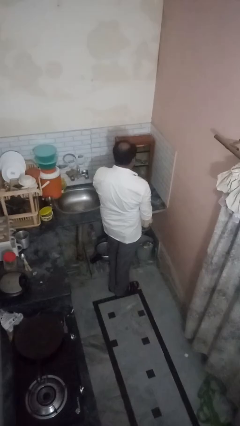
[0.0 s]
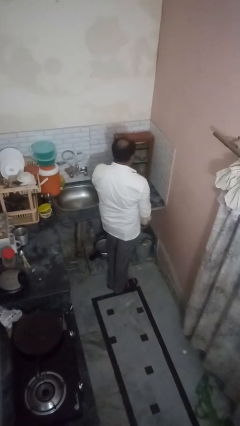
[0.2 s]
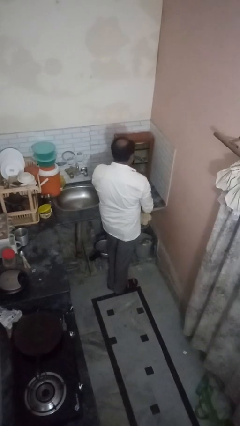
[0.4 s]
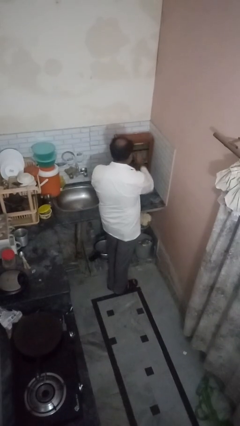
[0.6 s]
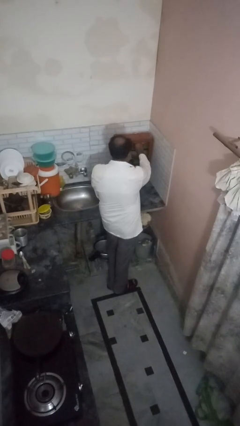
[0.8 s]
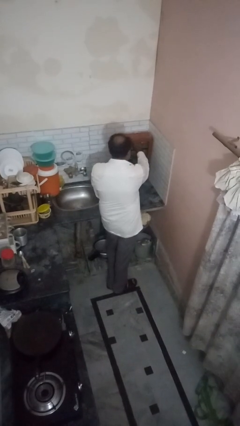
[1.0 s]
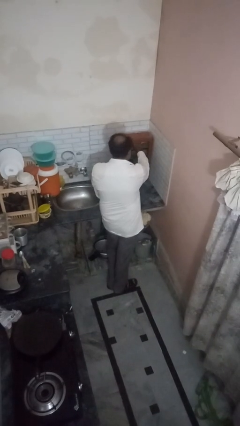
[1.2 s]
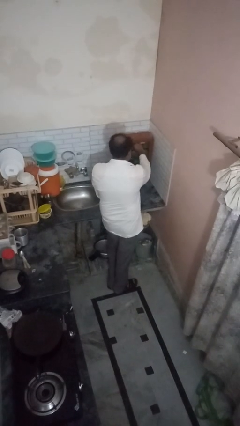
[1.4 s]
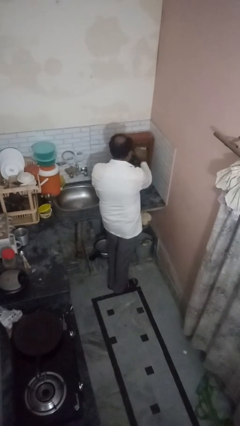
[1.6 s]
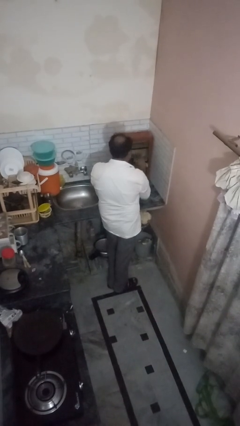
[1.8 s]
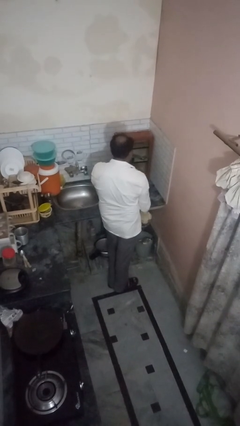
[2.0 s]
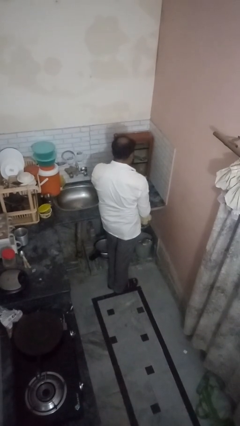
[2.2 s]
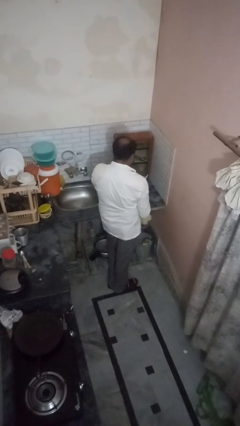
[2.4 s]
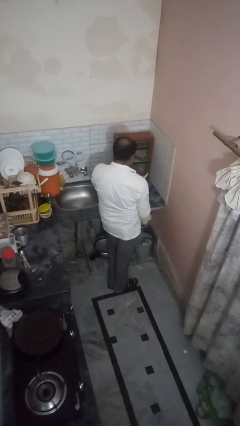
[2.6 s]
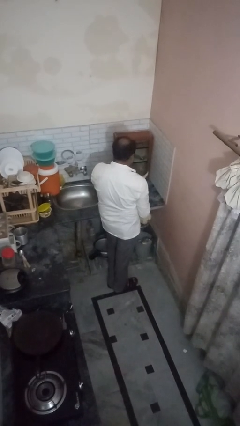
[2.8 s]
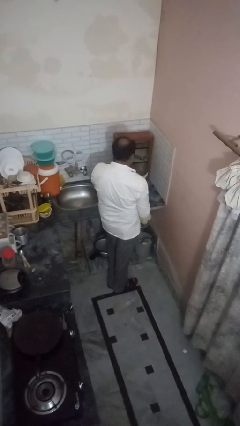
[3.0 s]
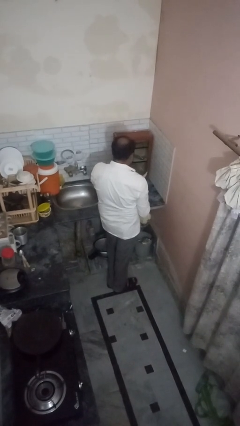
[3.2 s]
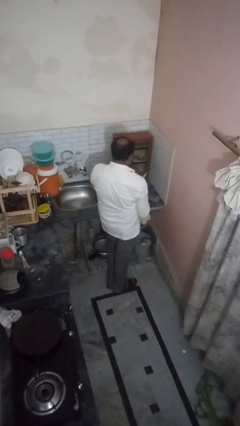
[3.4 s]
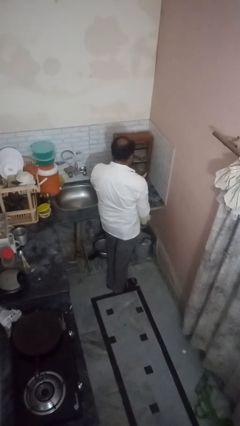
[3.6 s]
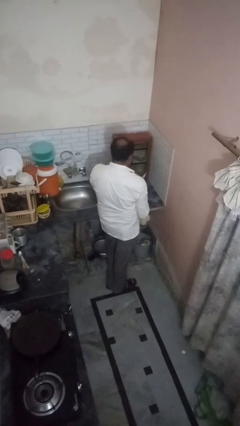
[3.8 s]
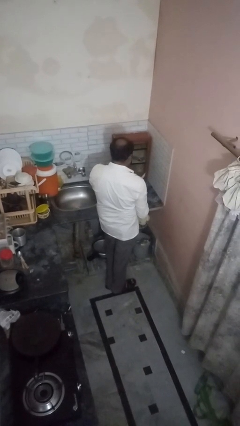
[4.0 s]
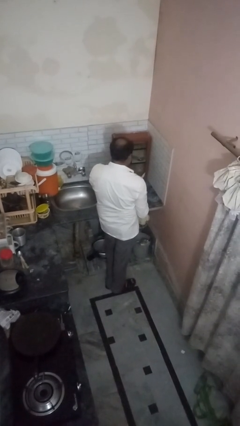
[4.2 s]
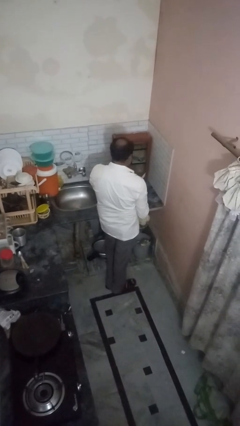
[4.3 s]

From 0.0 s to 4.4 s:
person takes object from kitchen drawer

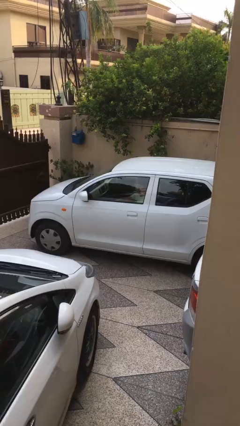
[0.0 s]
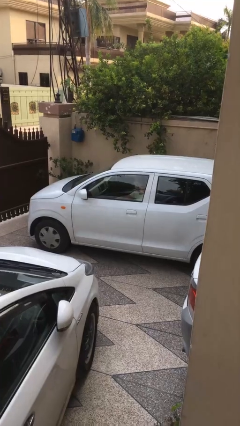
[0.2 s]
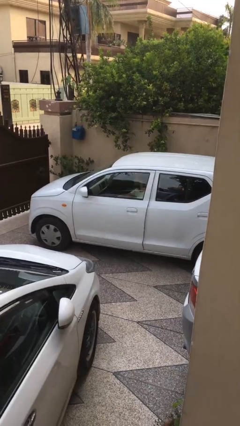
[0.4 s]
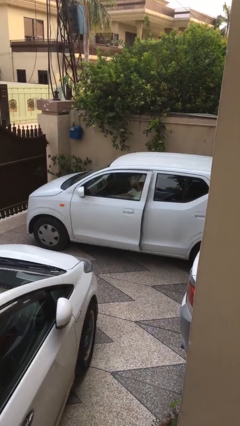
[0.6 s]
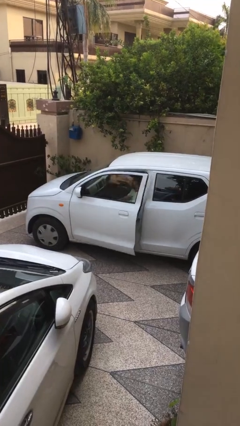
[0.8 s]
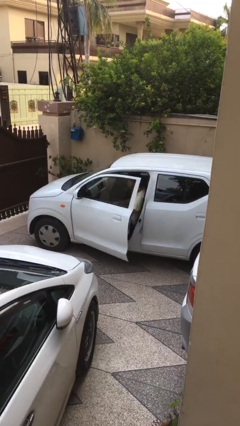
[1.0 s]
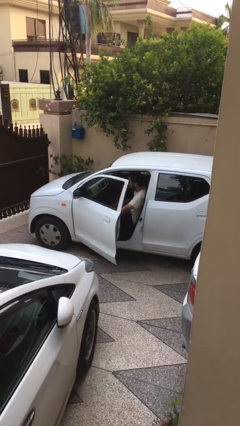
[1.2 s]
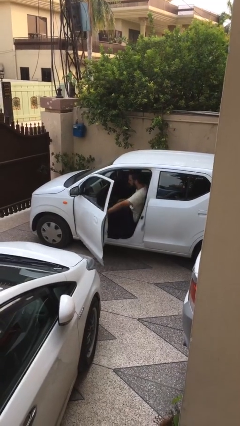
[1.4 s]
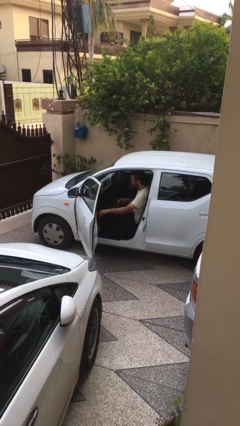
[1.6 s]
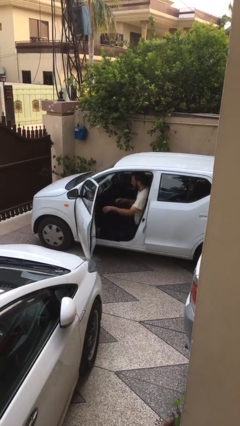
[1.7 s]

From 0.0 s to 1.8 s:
person opens car door

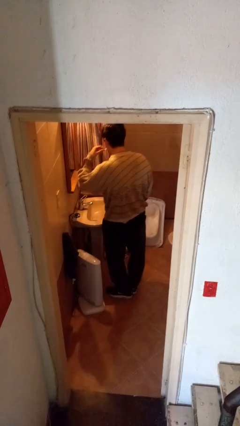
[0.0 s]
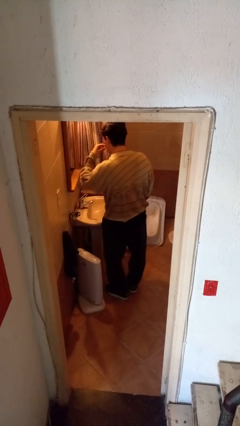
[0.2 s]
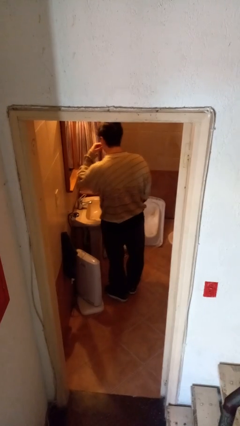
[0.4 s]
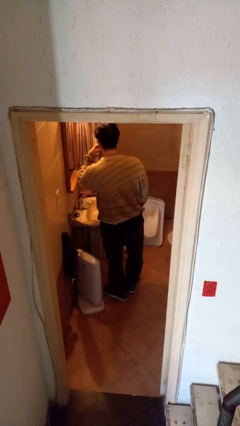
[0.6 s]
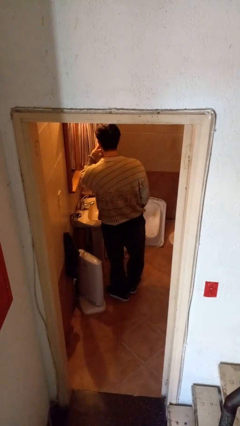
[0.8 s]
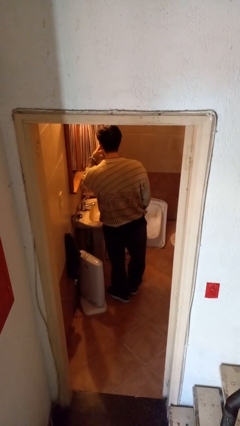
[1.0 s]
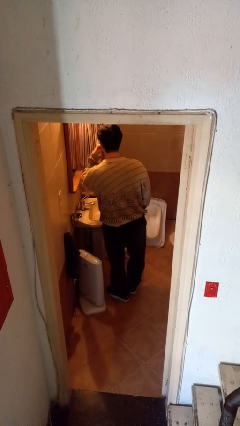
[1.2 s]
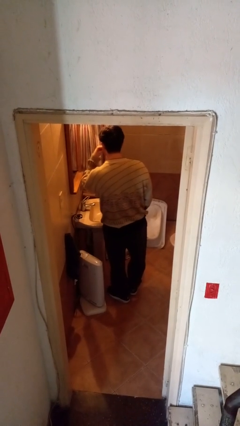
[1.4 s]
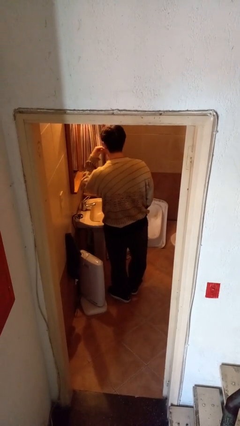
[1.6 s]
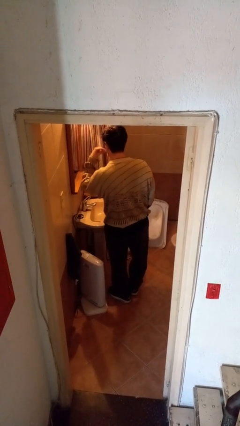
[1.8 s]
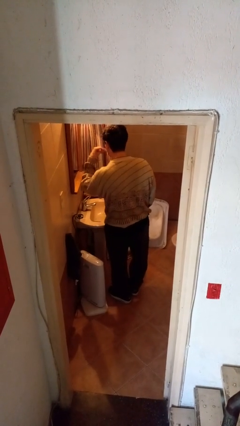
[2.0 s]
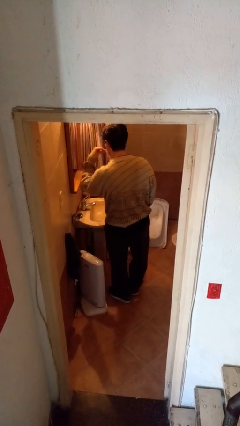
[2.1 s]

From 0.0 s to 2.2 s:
person brushes teeth

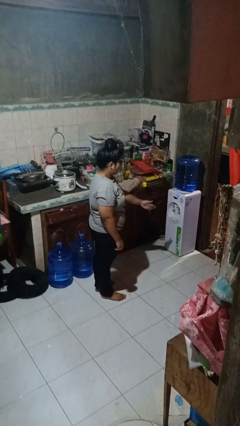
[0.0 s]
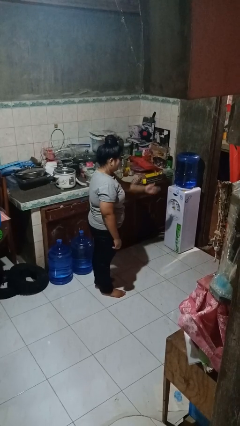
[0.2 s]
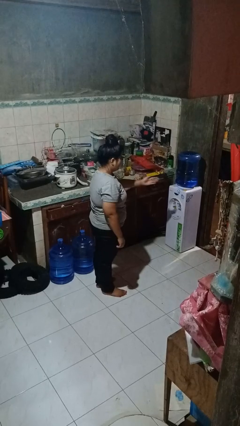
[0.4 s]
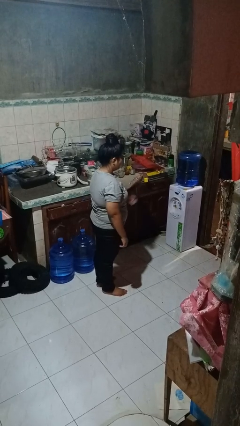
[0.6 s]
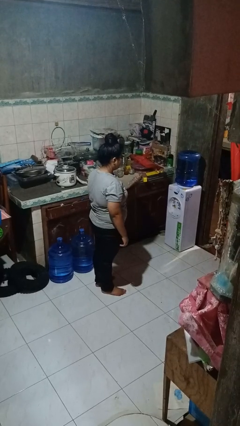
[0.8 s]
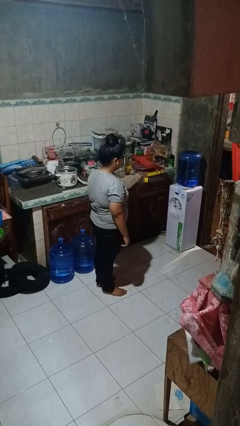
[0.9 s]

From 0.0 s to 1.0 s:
person karate chop

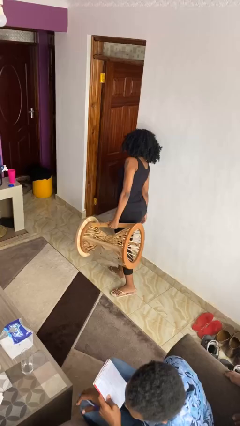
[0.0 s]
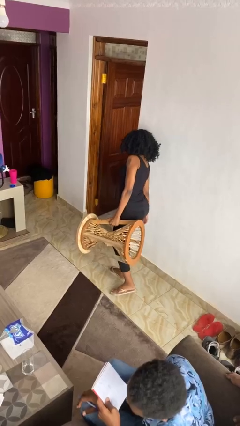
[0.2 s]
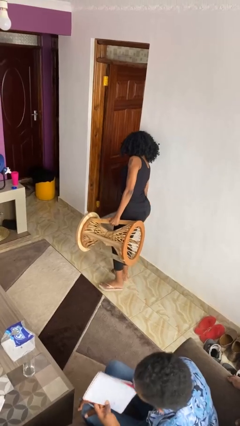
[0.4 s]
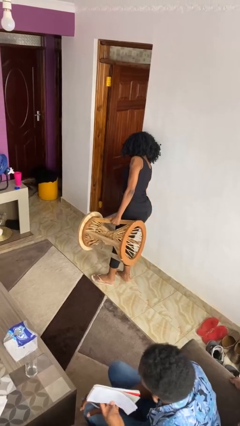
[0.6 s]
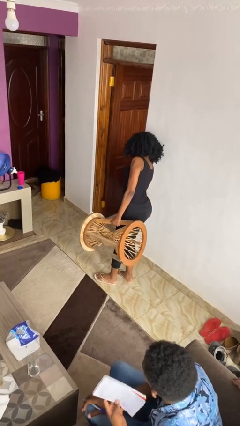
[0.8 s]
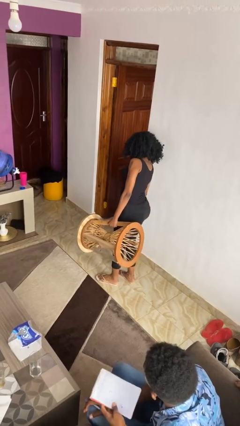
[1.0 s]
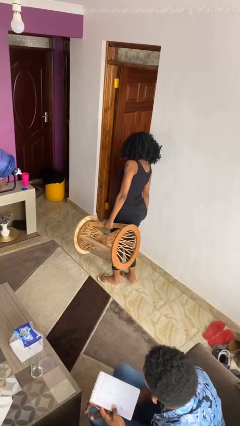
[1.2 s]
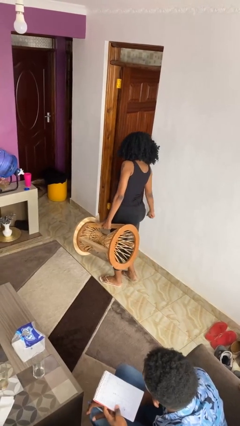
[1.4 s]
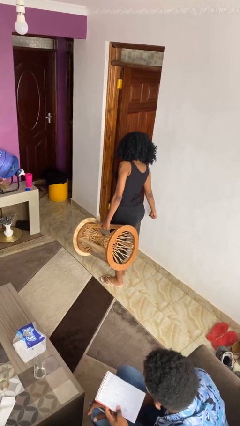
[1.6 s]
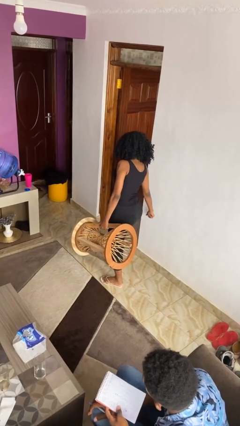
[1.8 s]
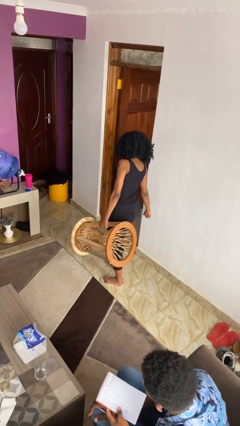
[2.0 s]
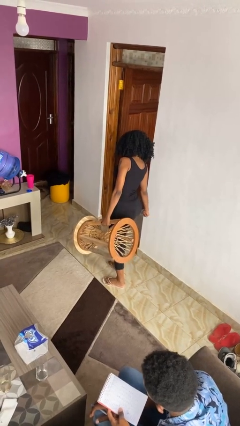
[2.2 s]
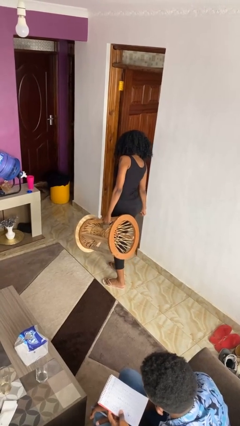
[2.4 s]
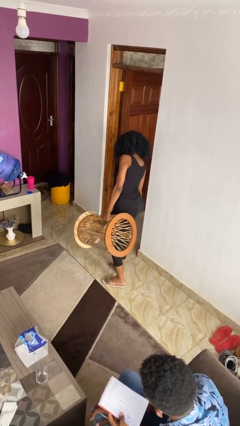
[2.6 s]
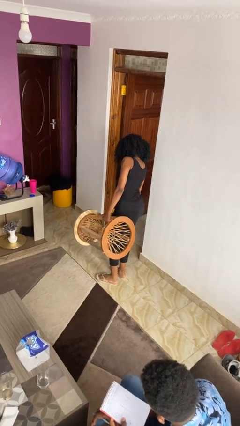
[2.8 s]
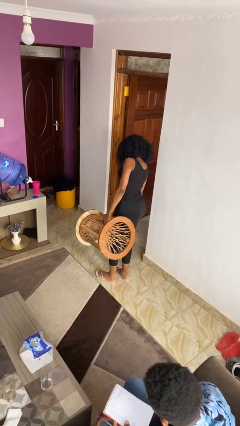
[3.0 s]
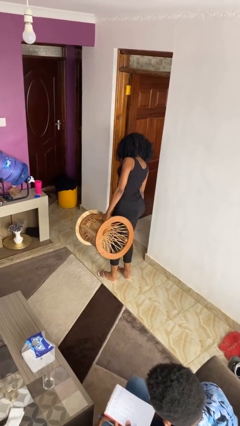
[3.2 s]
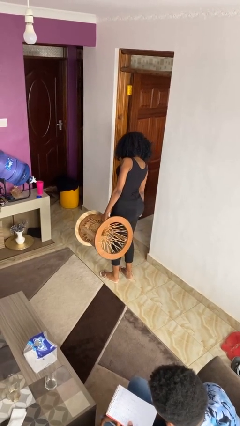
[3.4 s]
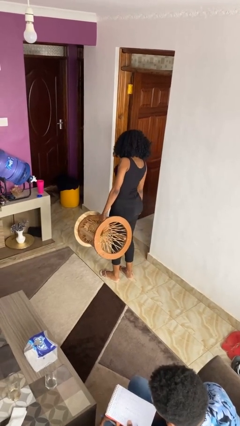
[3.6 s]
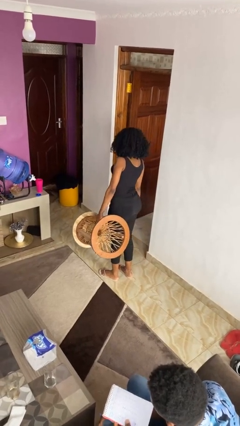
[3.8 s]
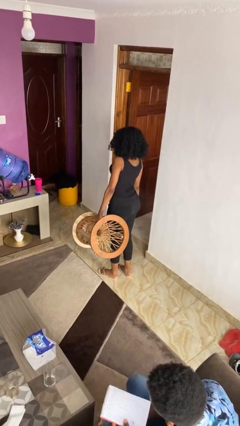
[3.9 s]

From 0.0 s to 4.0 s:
person carries furniture

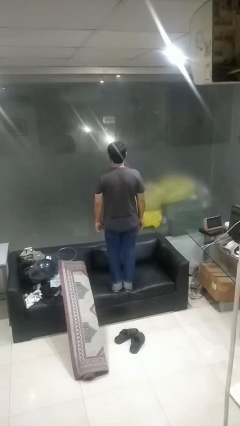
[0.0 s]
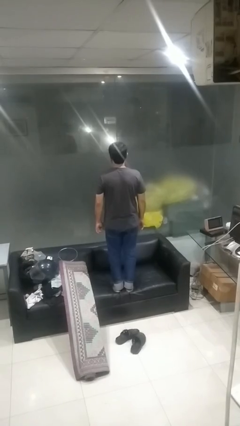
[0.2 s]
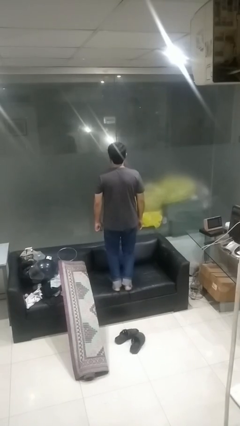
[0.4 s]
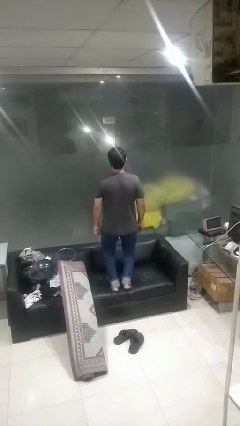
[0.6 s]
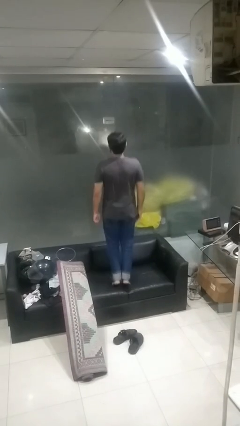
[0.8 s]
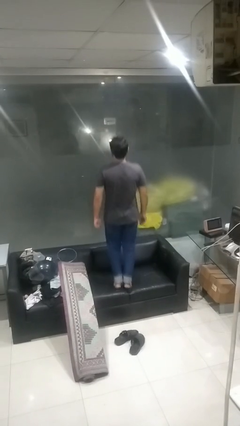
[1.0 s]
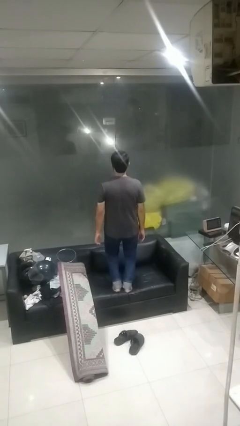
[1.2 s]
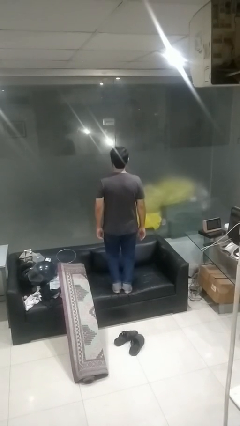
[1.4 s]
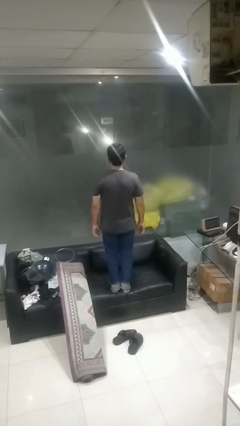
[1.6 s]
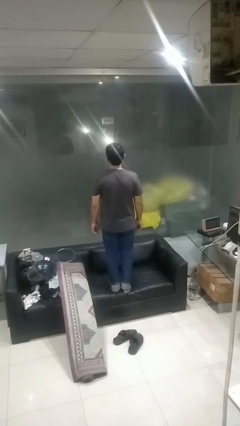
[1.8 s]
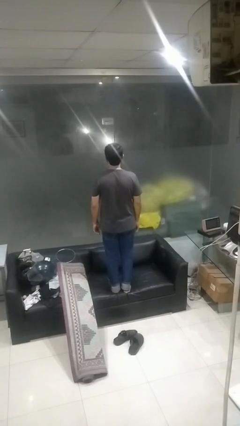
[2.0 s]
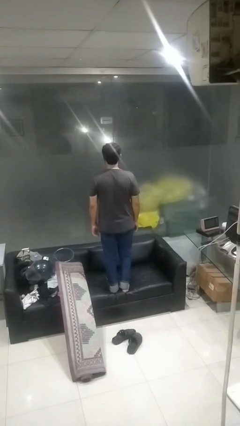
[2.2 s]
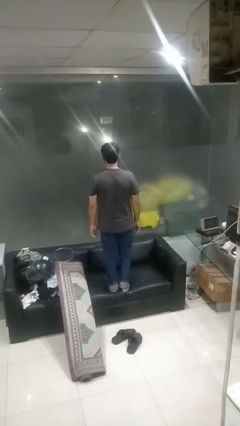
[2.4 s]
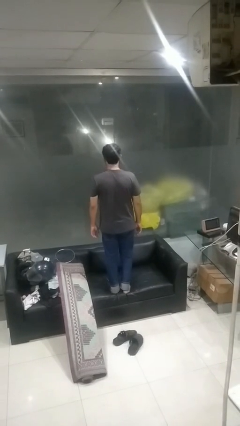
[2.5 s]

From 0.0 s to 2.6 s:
person jumps on couch

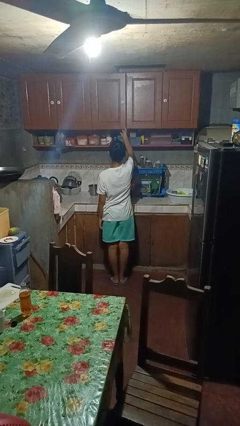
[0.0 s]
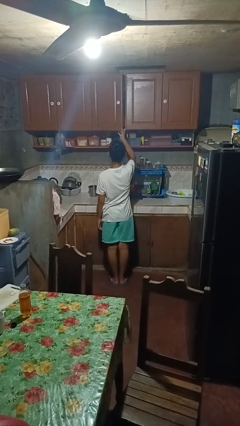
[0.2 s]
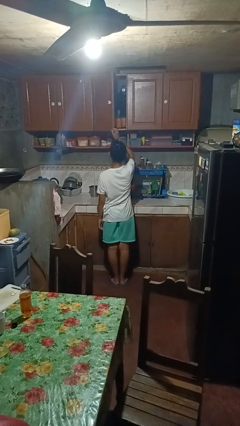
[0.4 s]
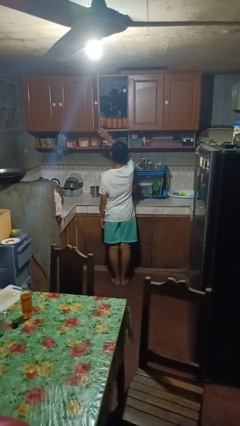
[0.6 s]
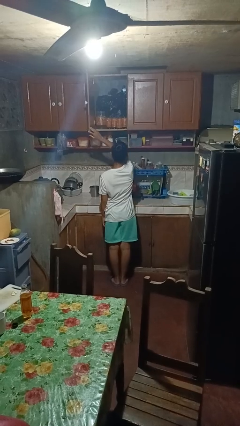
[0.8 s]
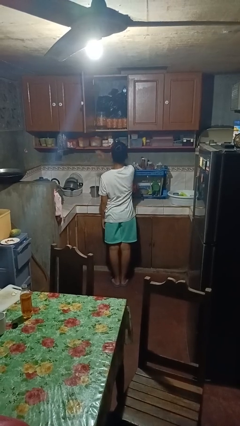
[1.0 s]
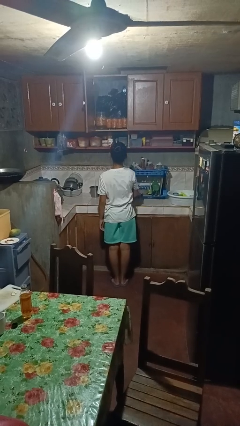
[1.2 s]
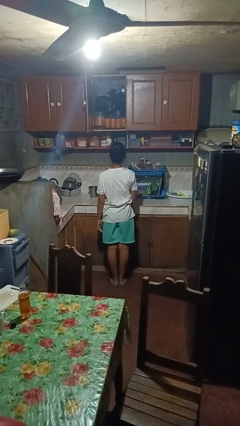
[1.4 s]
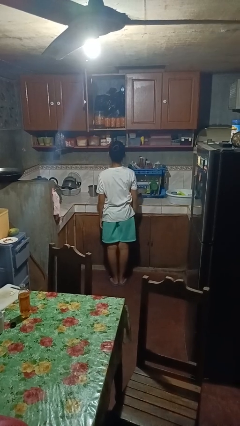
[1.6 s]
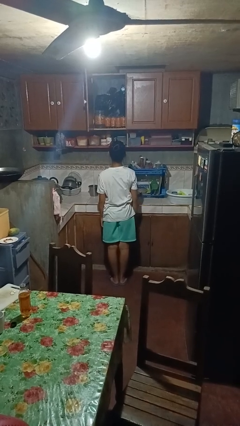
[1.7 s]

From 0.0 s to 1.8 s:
person opens cabinet
